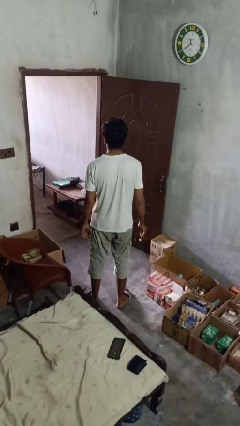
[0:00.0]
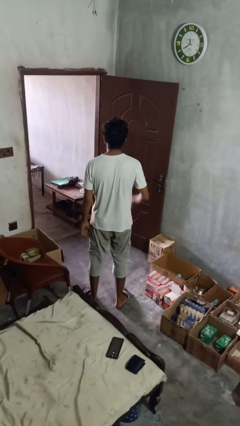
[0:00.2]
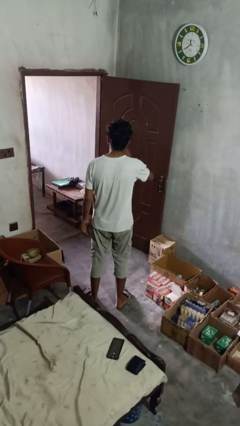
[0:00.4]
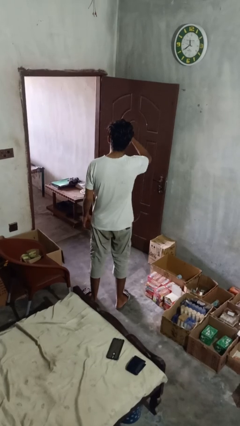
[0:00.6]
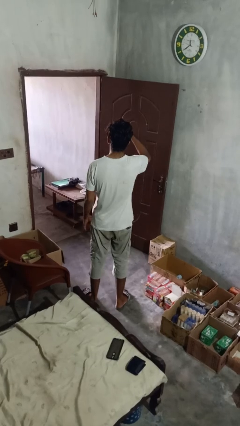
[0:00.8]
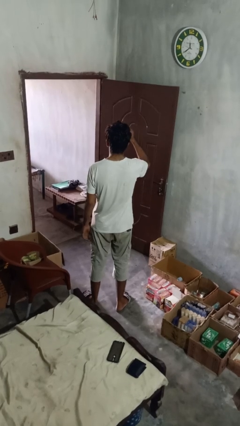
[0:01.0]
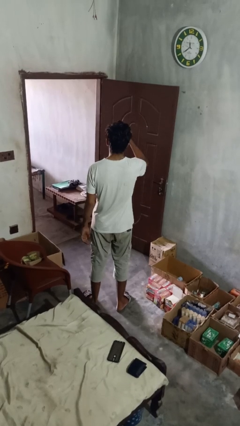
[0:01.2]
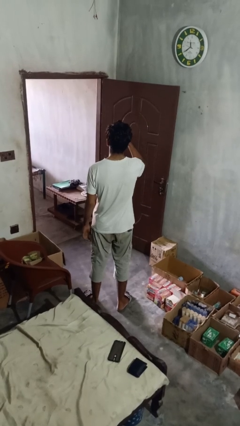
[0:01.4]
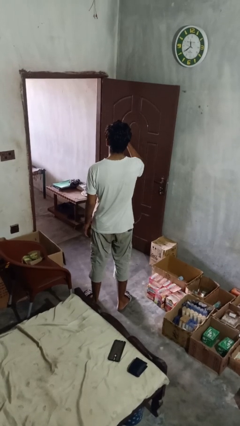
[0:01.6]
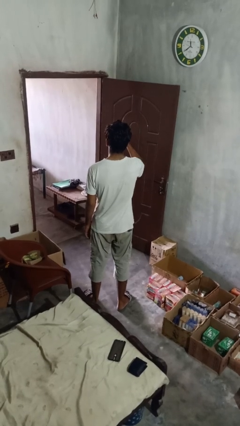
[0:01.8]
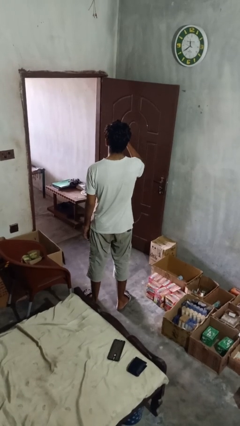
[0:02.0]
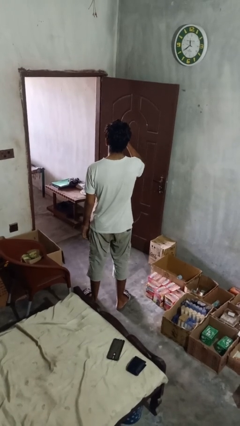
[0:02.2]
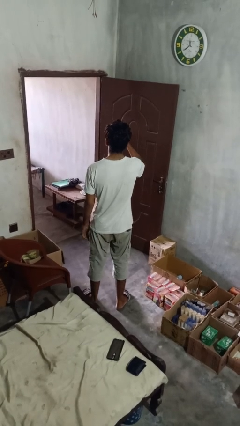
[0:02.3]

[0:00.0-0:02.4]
person puts on glasses

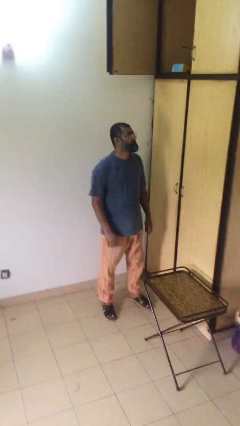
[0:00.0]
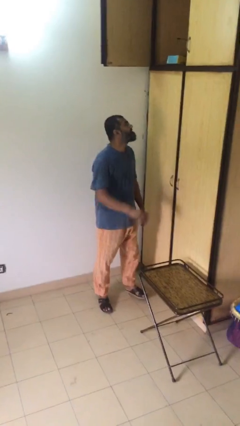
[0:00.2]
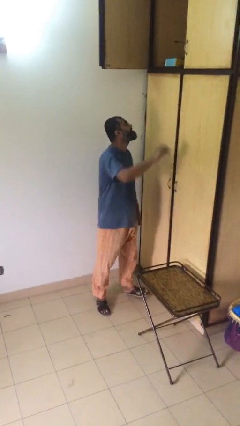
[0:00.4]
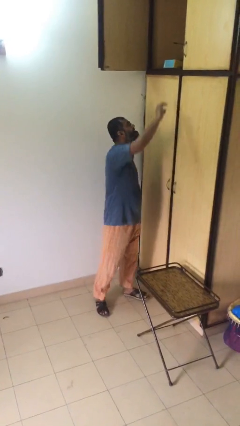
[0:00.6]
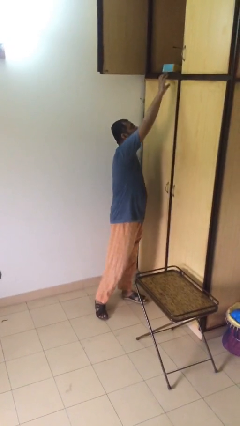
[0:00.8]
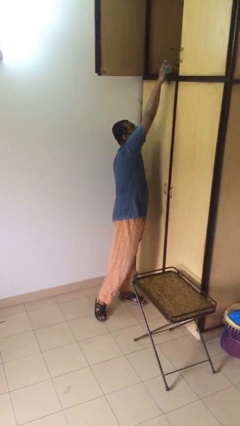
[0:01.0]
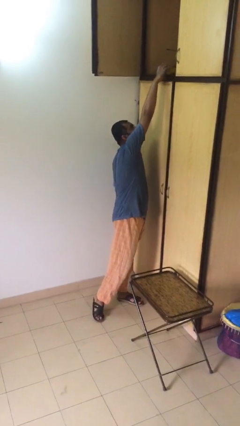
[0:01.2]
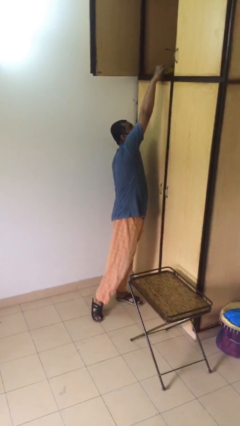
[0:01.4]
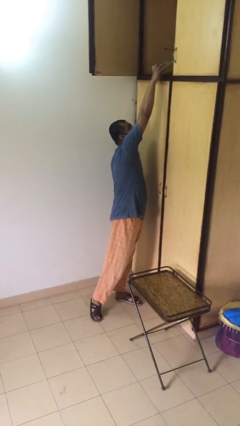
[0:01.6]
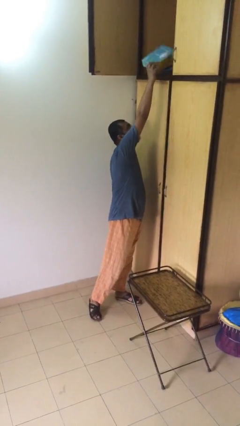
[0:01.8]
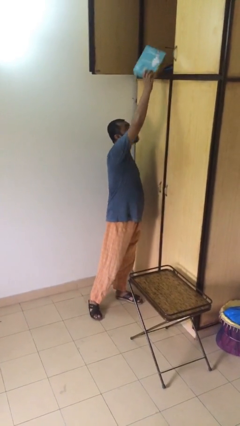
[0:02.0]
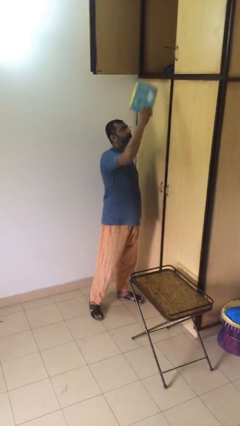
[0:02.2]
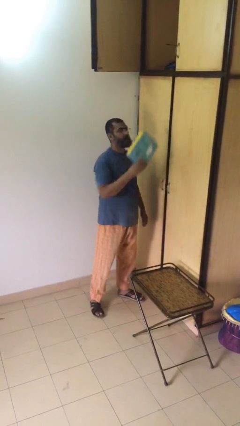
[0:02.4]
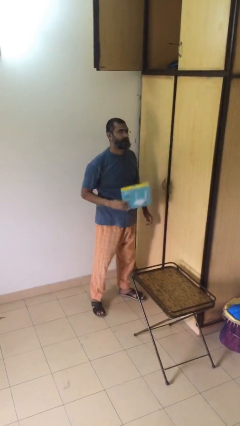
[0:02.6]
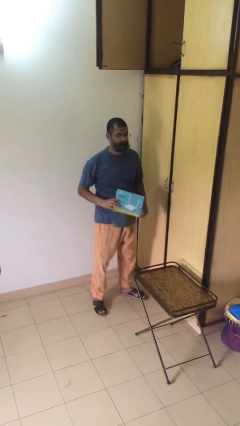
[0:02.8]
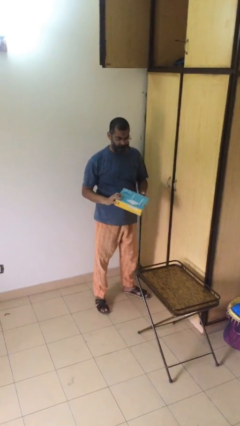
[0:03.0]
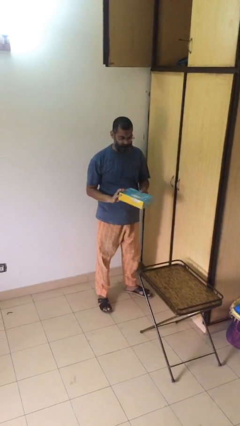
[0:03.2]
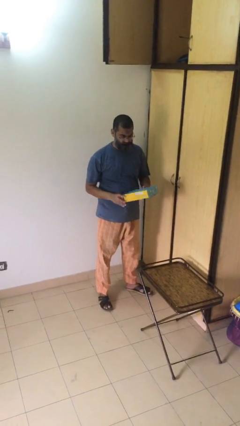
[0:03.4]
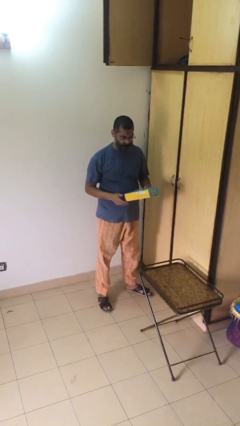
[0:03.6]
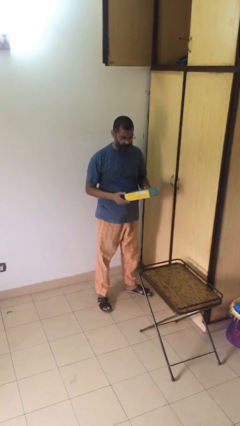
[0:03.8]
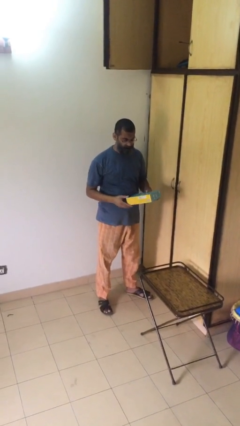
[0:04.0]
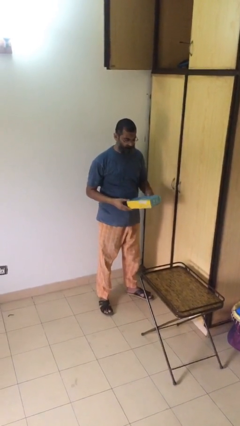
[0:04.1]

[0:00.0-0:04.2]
person picks up object from shelf

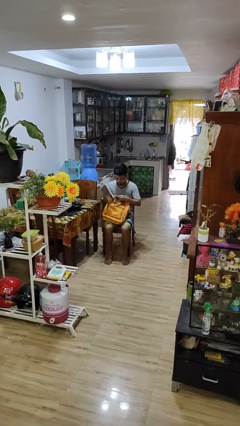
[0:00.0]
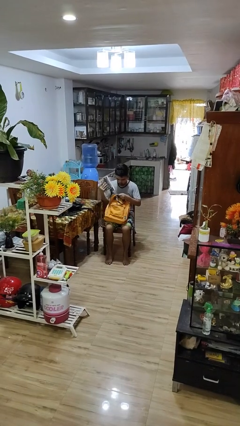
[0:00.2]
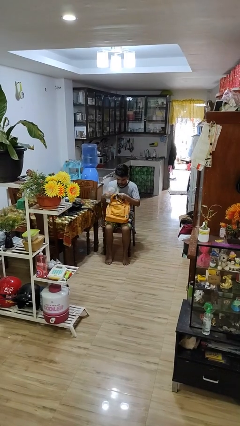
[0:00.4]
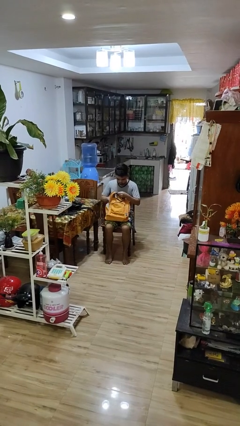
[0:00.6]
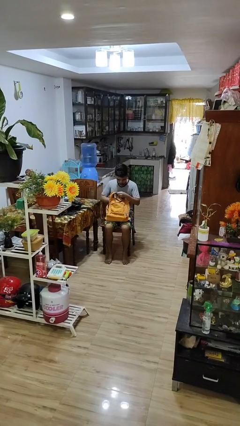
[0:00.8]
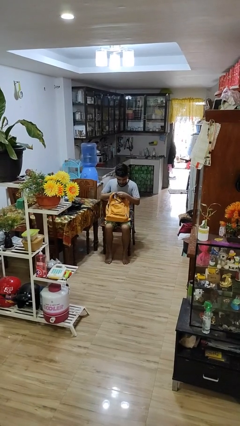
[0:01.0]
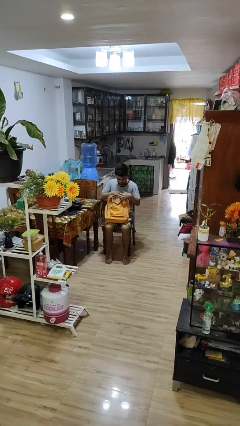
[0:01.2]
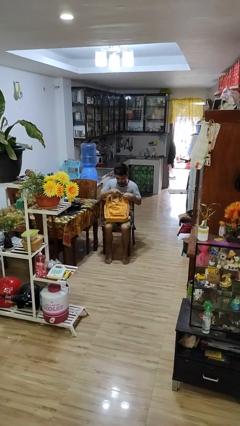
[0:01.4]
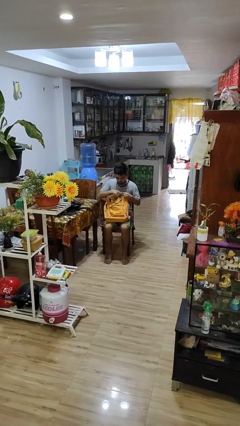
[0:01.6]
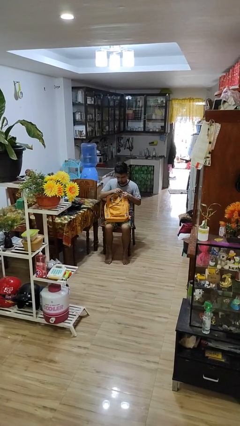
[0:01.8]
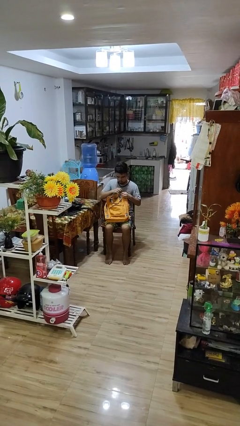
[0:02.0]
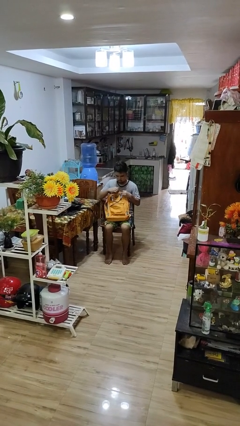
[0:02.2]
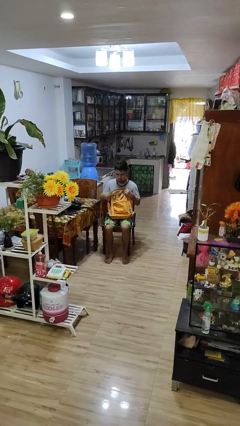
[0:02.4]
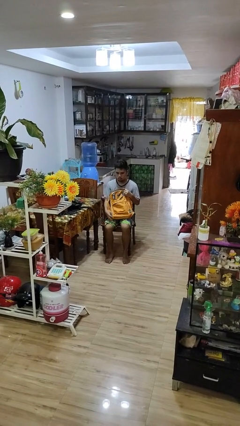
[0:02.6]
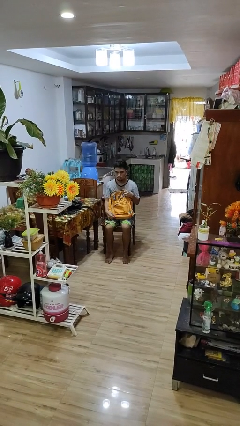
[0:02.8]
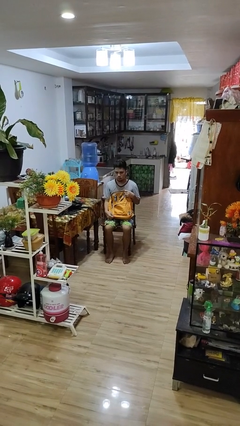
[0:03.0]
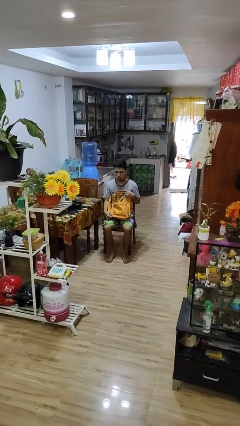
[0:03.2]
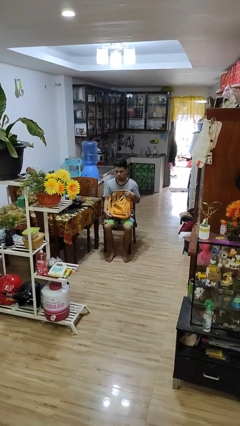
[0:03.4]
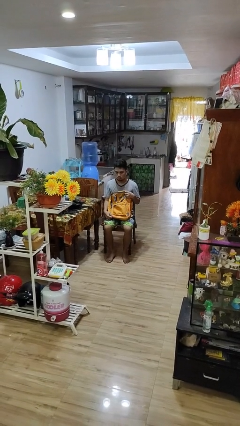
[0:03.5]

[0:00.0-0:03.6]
person puts object into backpack

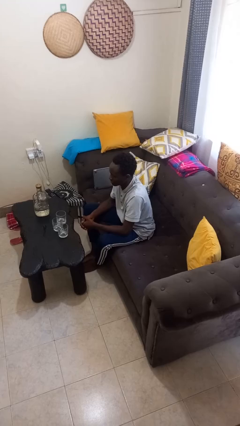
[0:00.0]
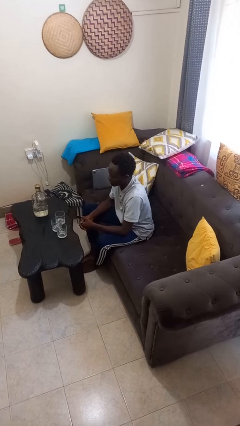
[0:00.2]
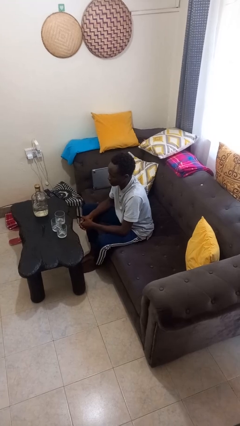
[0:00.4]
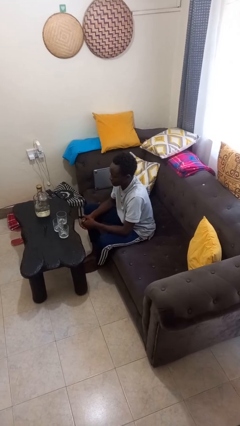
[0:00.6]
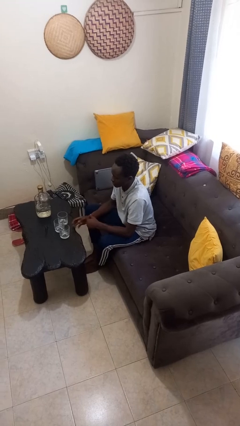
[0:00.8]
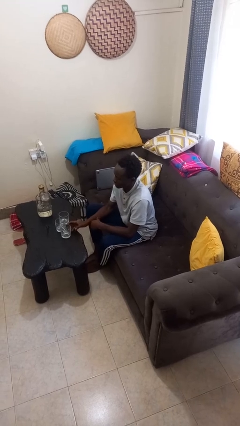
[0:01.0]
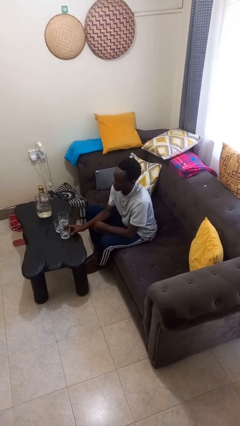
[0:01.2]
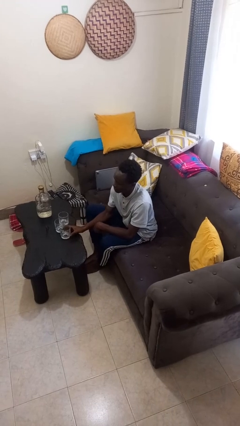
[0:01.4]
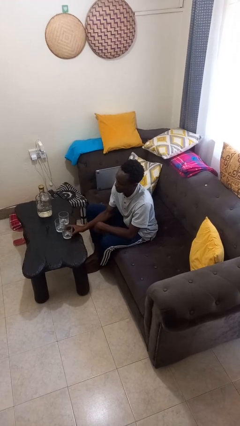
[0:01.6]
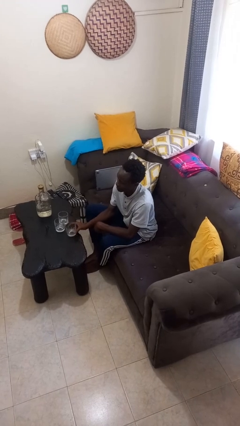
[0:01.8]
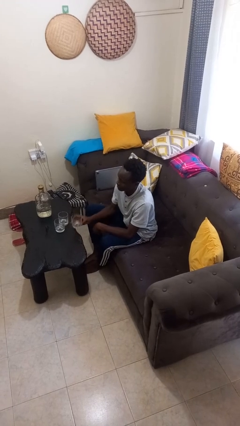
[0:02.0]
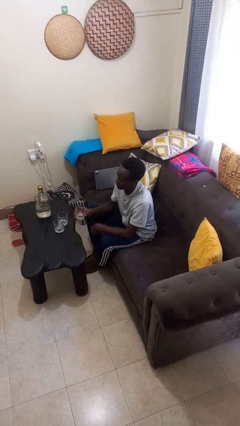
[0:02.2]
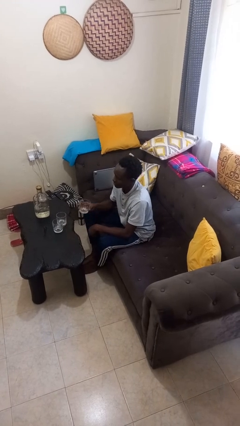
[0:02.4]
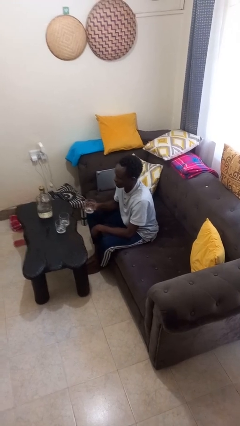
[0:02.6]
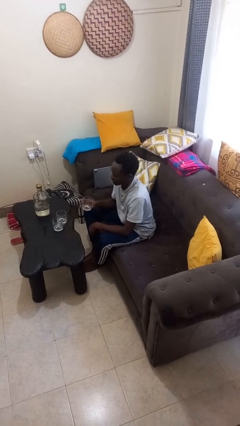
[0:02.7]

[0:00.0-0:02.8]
person picks up object from table

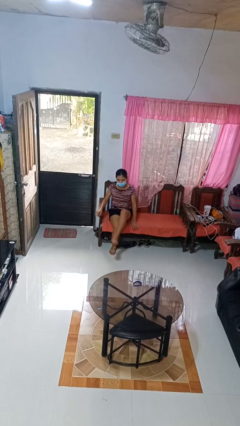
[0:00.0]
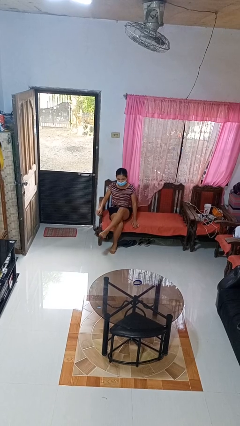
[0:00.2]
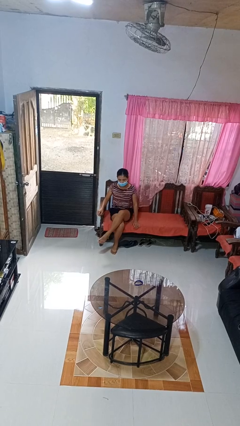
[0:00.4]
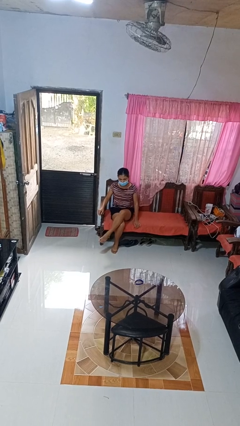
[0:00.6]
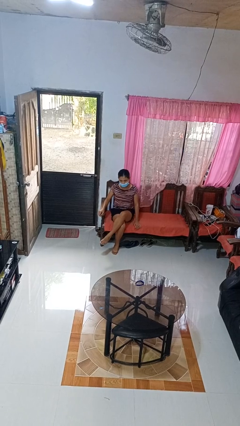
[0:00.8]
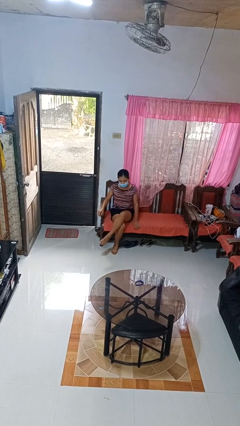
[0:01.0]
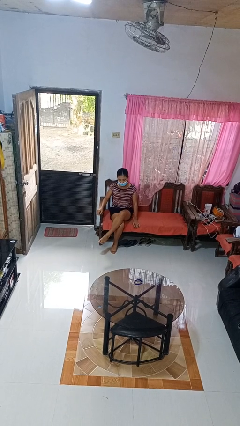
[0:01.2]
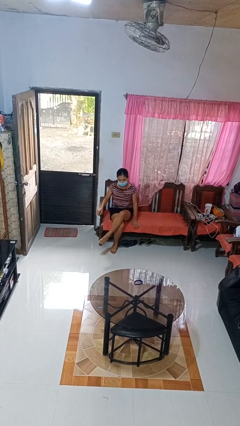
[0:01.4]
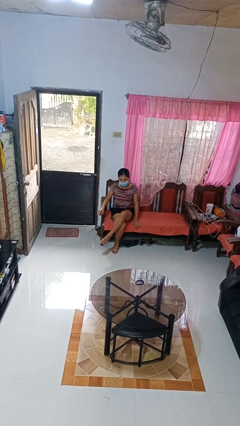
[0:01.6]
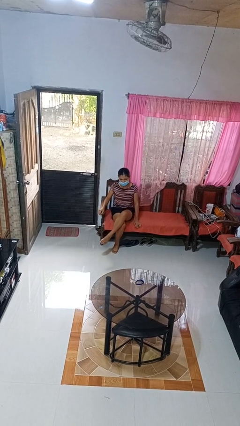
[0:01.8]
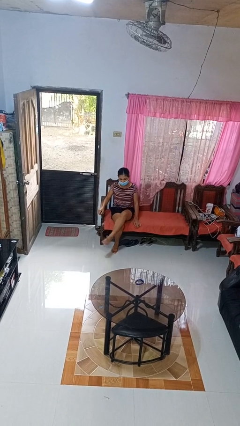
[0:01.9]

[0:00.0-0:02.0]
person crosses legs

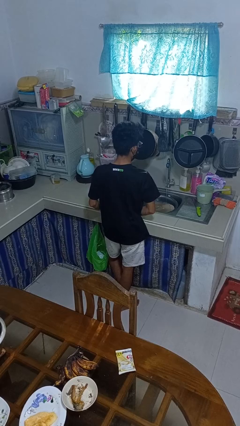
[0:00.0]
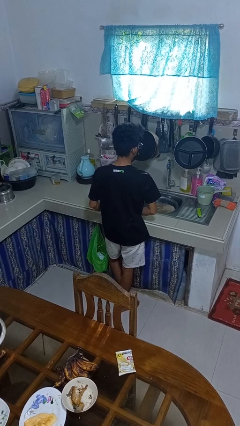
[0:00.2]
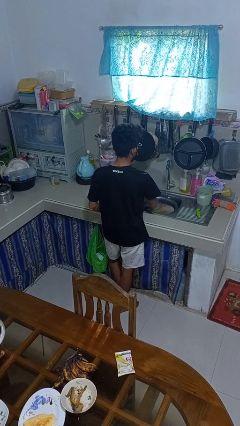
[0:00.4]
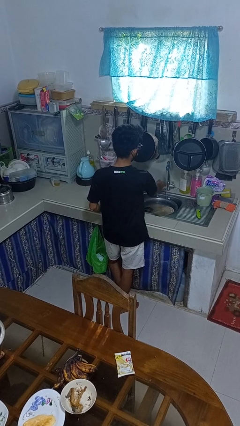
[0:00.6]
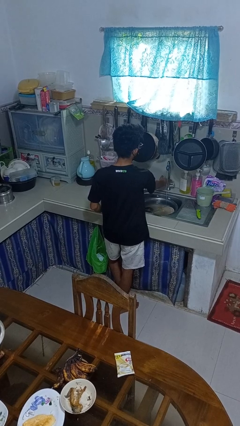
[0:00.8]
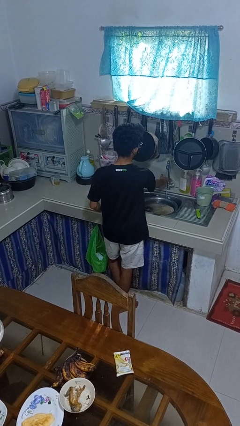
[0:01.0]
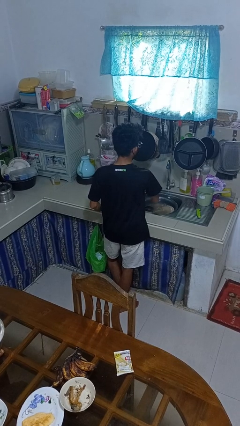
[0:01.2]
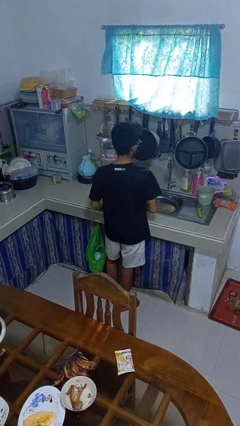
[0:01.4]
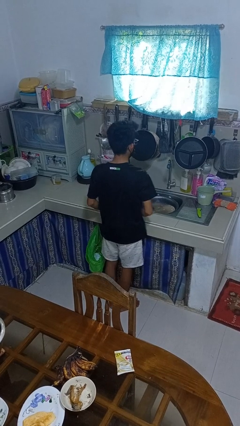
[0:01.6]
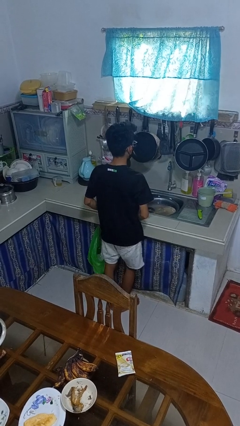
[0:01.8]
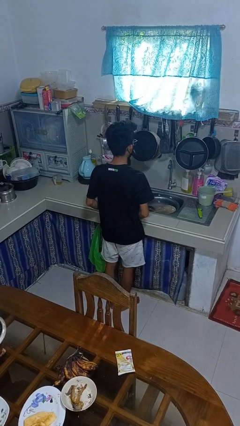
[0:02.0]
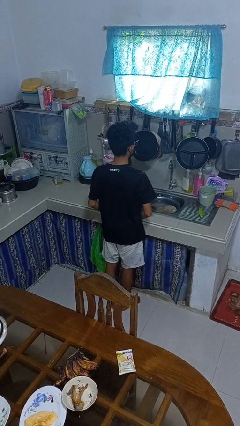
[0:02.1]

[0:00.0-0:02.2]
person turns off faucet

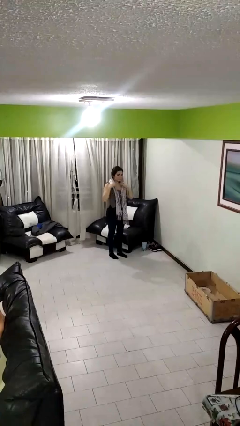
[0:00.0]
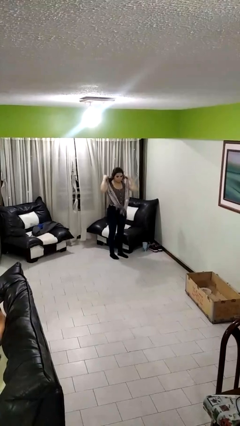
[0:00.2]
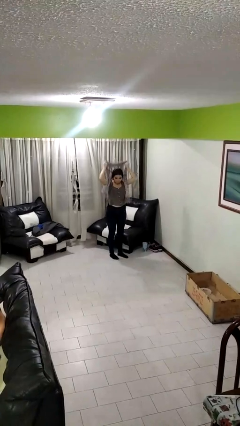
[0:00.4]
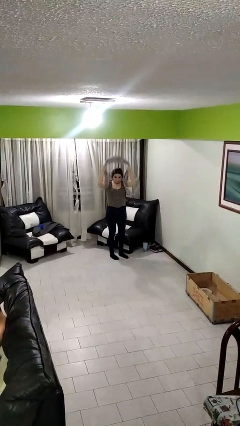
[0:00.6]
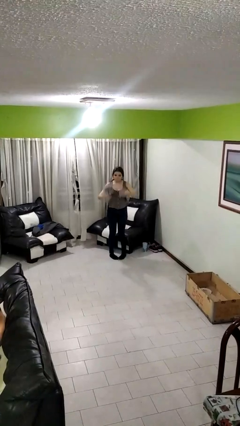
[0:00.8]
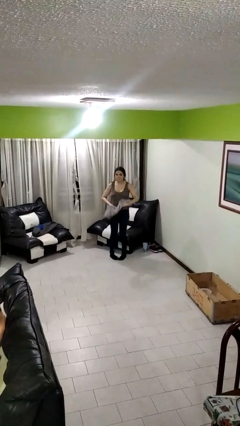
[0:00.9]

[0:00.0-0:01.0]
person takes off scarf
